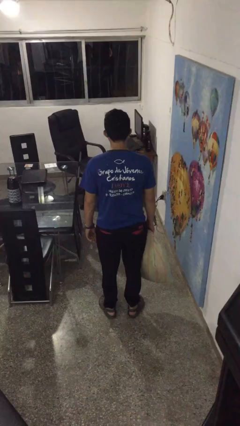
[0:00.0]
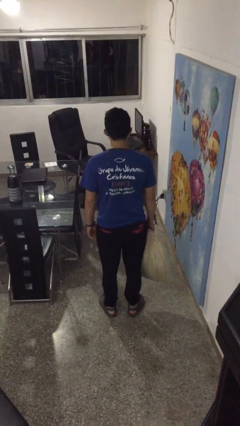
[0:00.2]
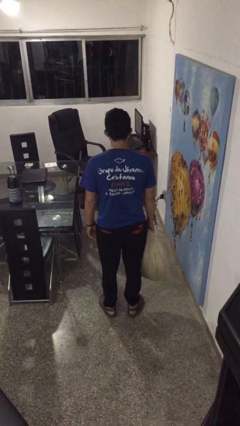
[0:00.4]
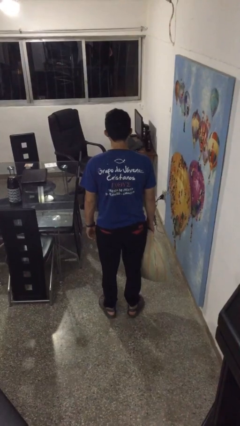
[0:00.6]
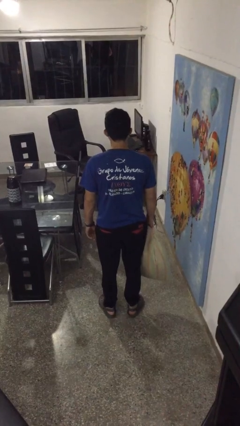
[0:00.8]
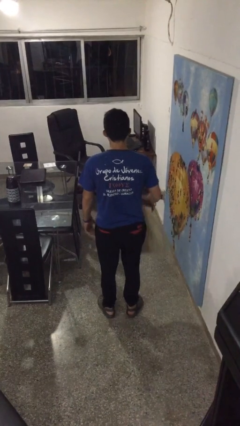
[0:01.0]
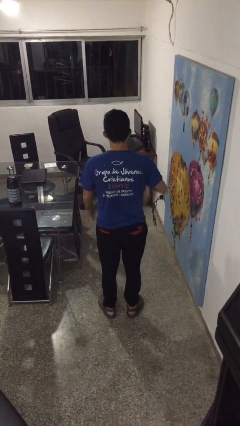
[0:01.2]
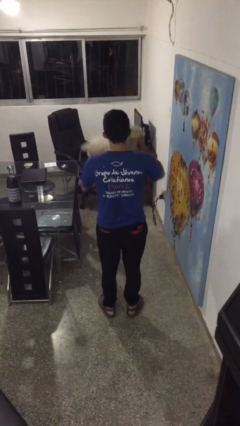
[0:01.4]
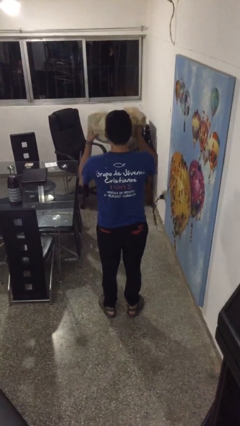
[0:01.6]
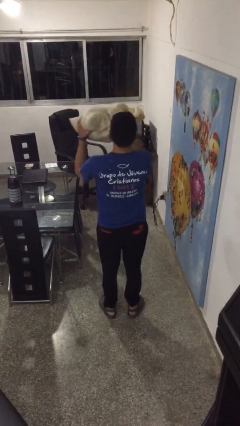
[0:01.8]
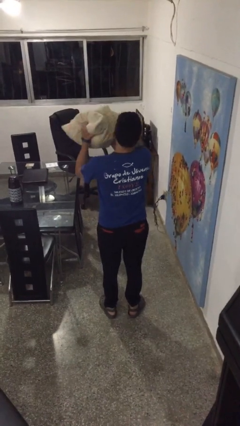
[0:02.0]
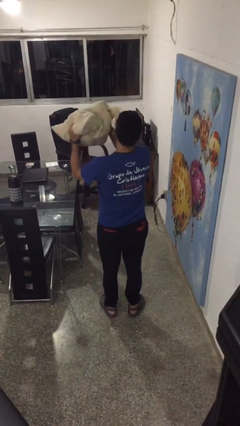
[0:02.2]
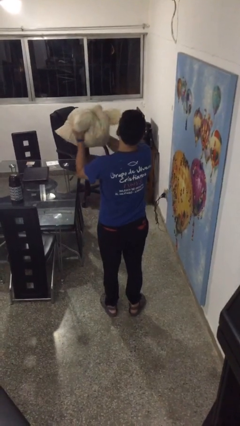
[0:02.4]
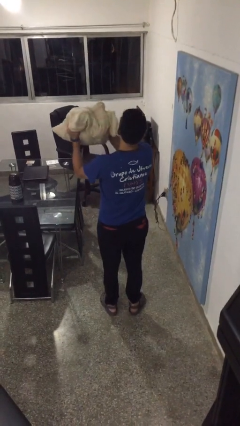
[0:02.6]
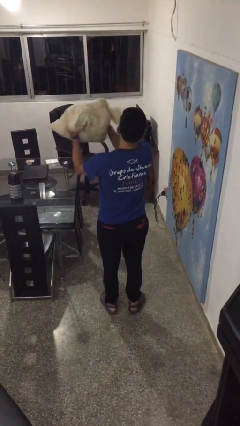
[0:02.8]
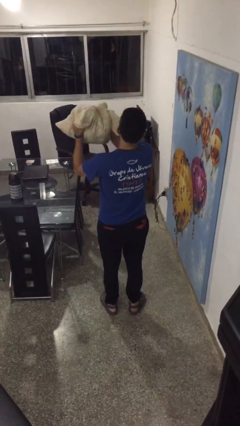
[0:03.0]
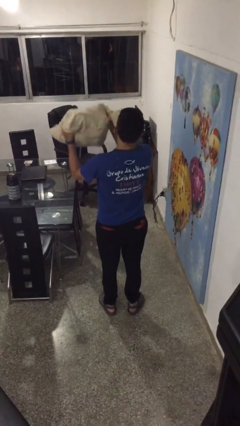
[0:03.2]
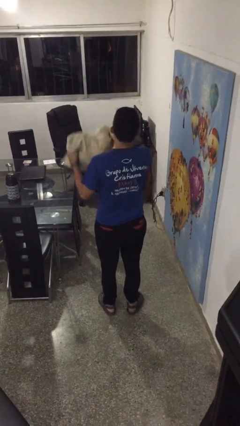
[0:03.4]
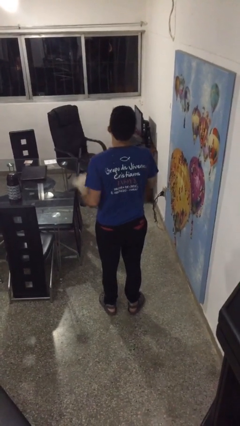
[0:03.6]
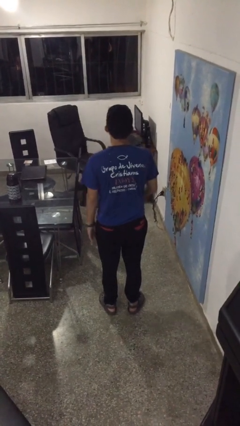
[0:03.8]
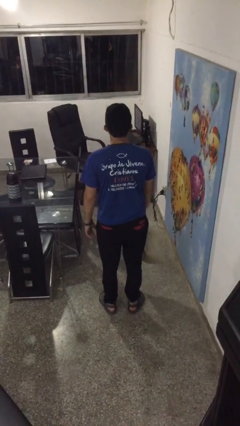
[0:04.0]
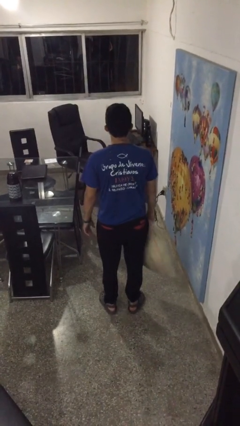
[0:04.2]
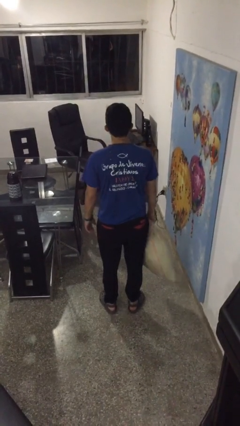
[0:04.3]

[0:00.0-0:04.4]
person squeezes object

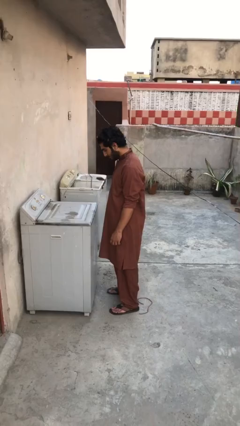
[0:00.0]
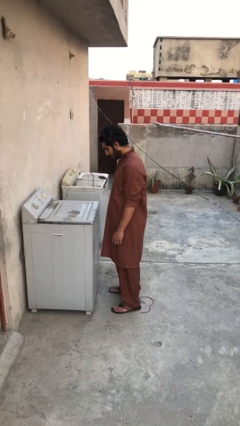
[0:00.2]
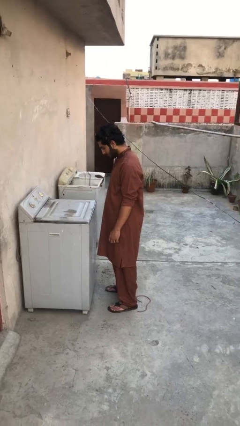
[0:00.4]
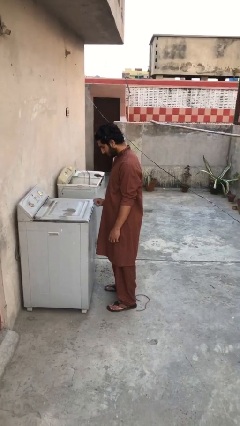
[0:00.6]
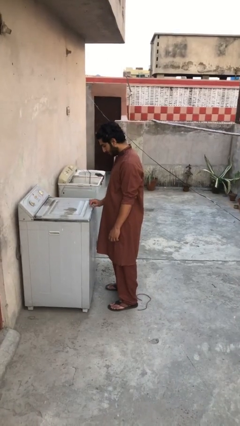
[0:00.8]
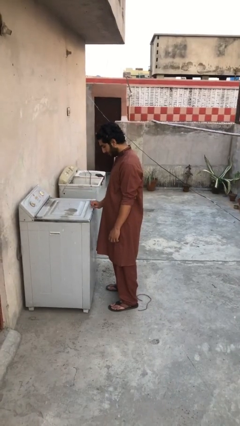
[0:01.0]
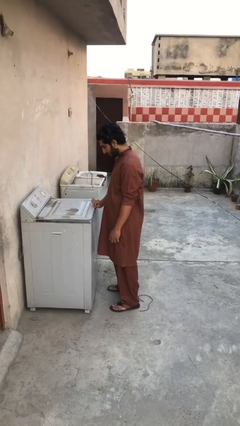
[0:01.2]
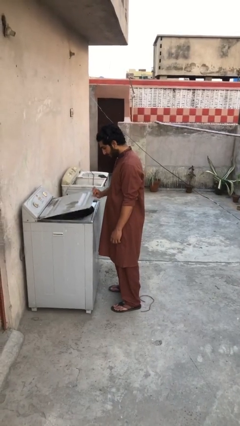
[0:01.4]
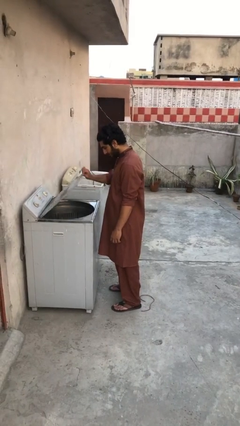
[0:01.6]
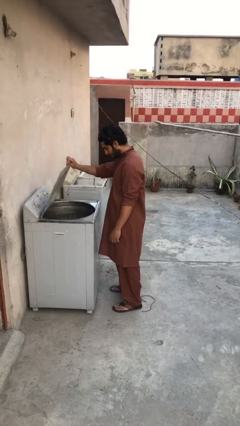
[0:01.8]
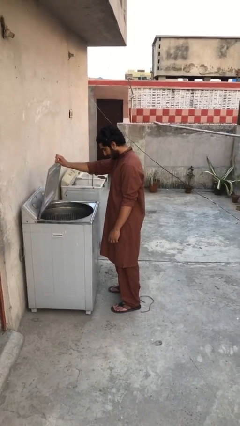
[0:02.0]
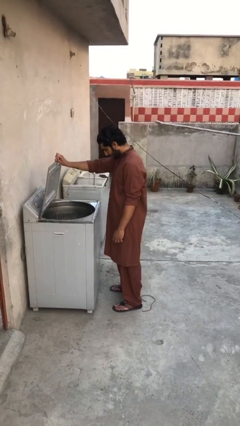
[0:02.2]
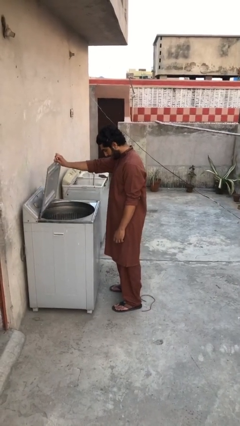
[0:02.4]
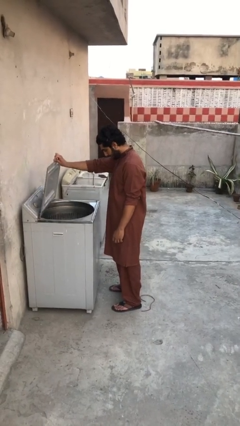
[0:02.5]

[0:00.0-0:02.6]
person opens clothes washer

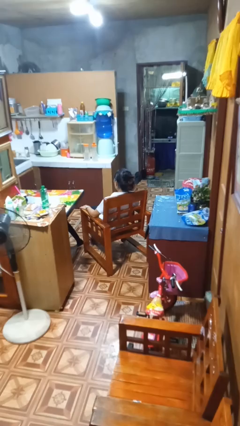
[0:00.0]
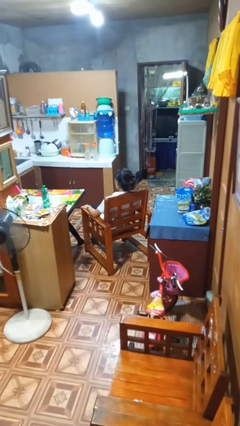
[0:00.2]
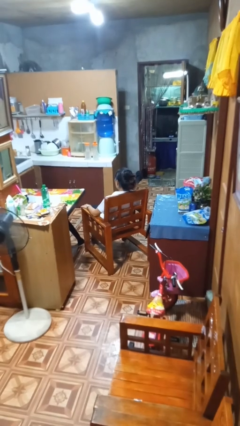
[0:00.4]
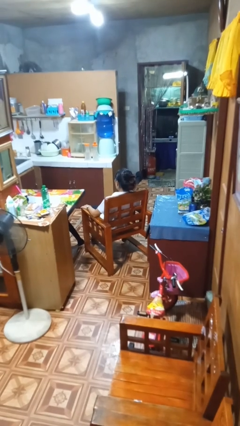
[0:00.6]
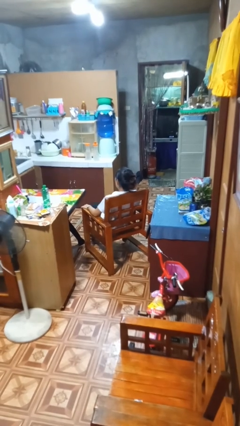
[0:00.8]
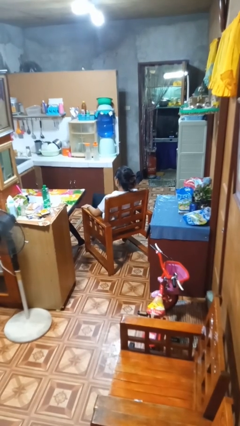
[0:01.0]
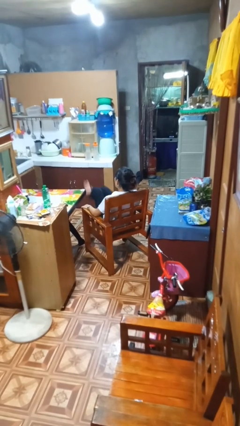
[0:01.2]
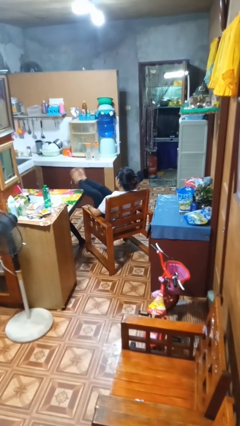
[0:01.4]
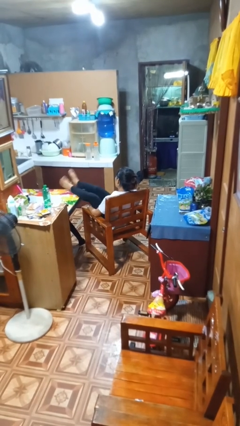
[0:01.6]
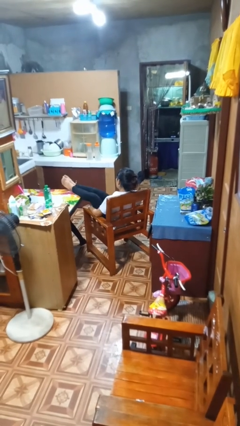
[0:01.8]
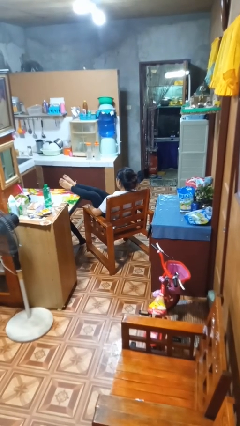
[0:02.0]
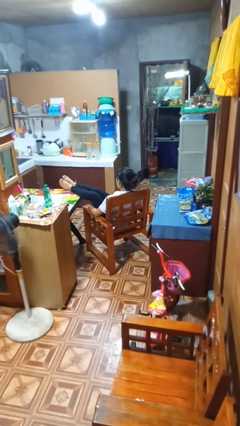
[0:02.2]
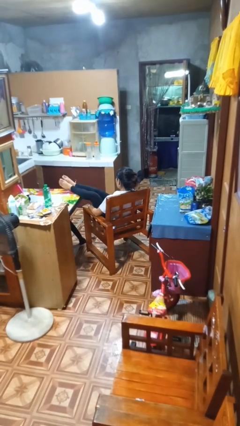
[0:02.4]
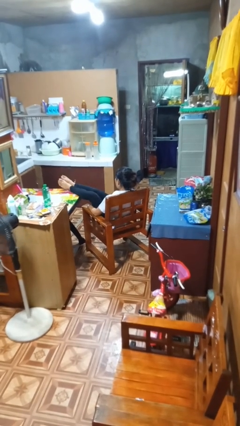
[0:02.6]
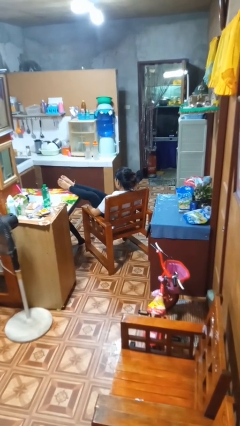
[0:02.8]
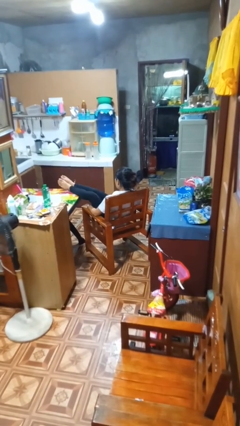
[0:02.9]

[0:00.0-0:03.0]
person puts feet up

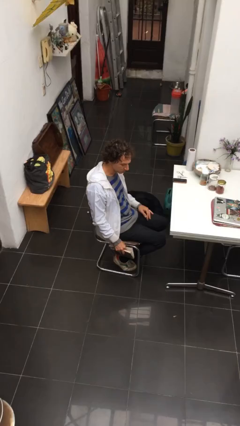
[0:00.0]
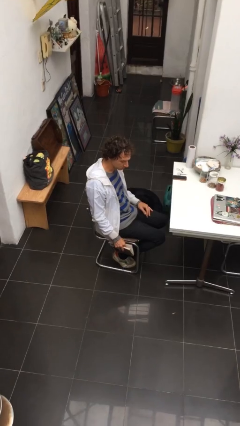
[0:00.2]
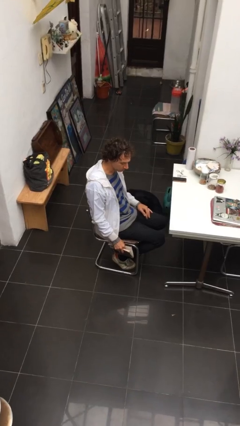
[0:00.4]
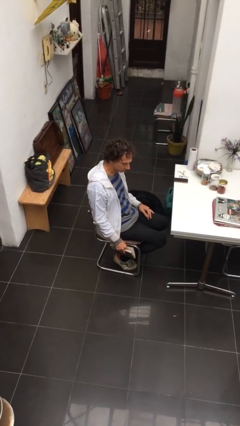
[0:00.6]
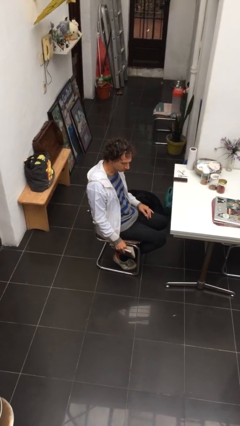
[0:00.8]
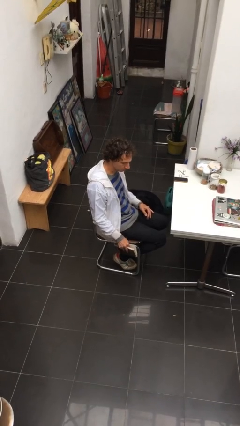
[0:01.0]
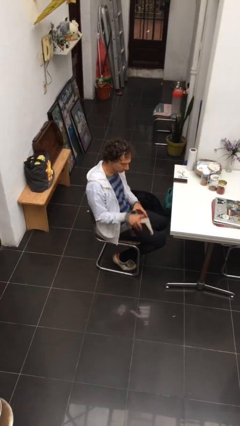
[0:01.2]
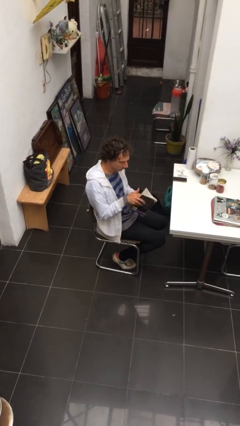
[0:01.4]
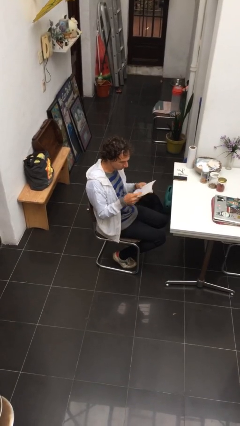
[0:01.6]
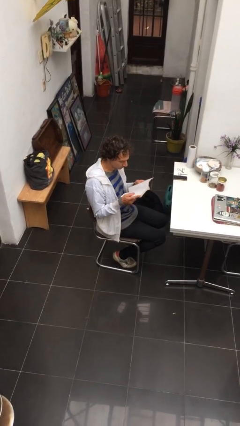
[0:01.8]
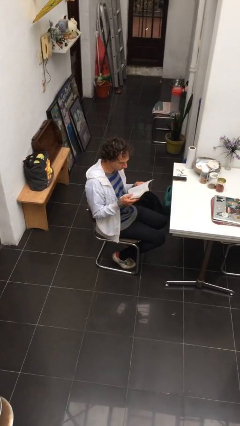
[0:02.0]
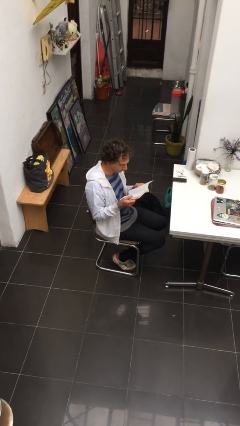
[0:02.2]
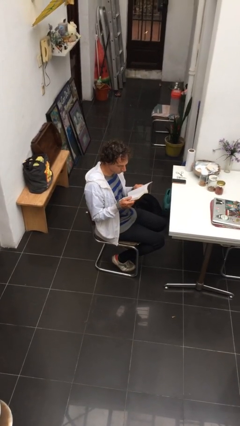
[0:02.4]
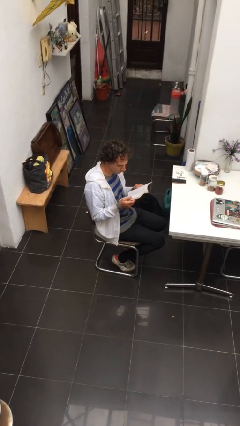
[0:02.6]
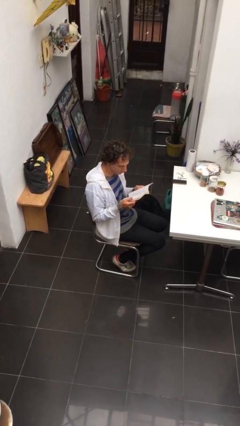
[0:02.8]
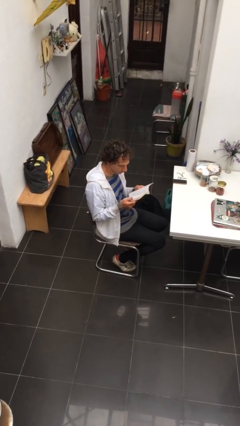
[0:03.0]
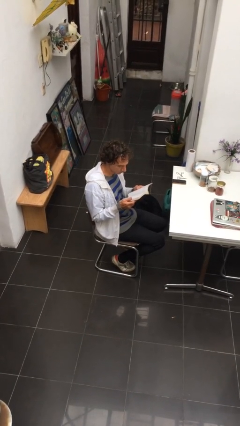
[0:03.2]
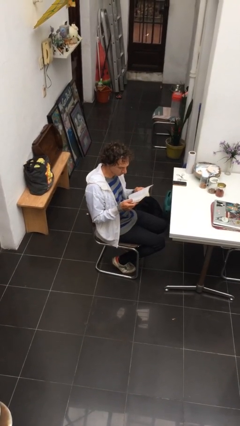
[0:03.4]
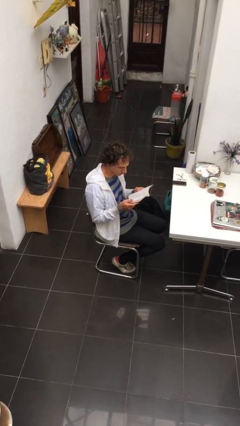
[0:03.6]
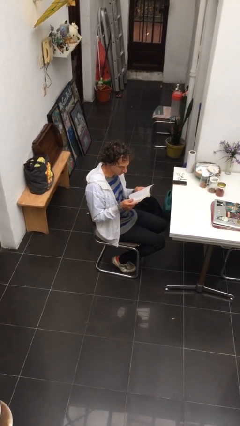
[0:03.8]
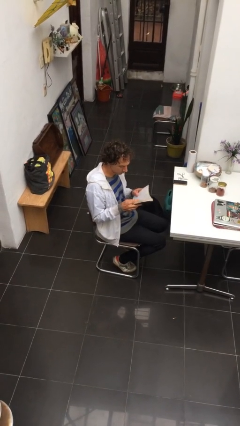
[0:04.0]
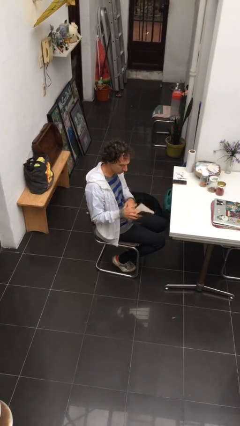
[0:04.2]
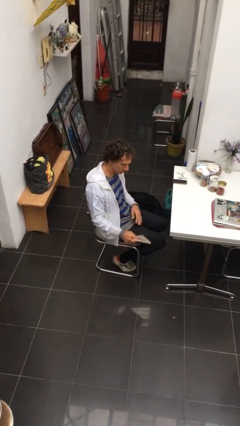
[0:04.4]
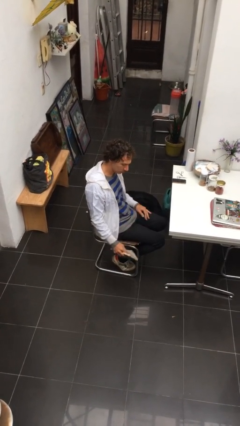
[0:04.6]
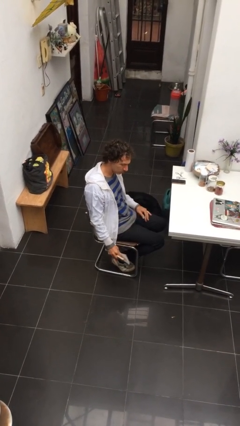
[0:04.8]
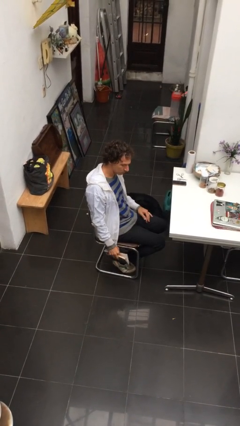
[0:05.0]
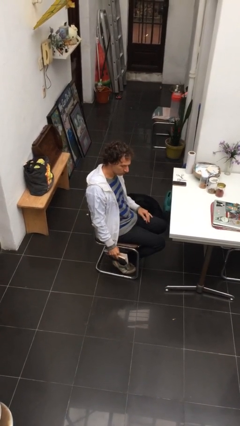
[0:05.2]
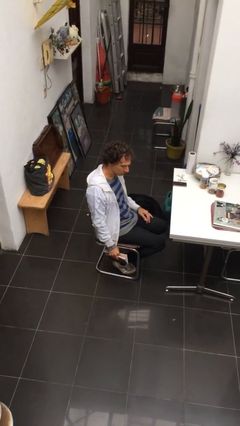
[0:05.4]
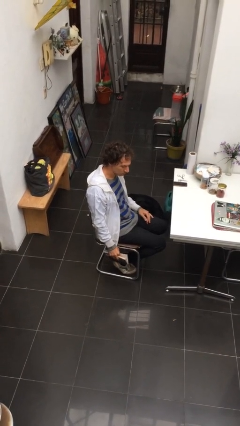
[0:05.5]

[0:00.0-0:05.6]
person reads document

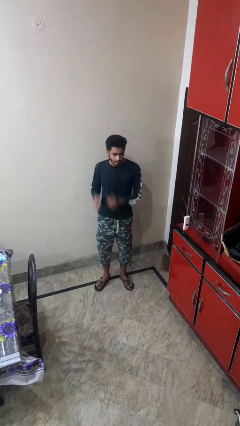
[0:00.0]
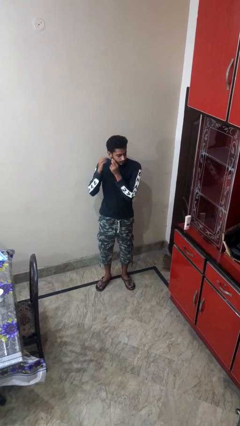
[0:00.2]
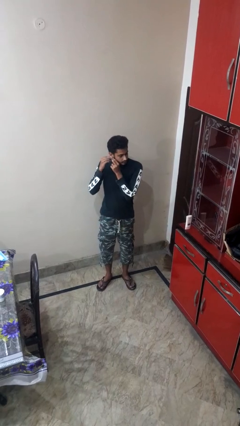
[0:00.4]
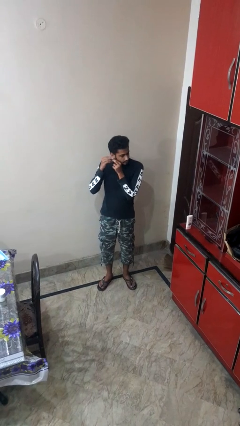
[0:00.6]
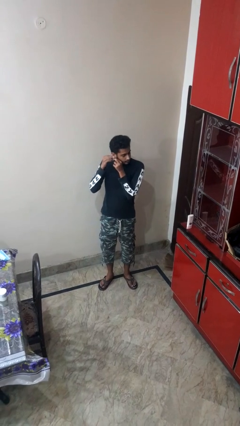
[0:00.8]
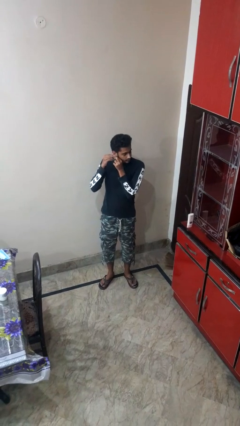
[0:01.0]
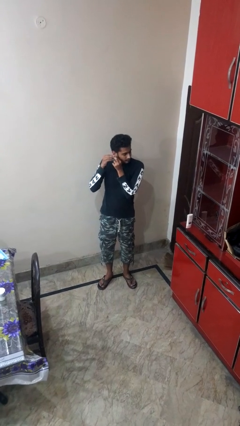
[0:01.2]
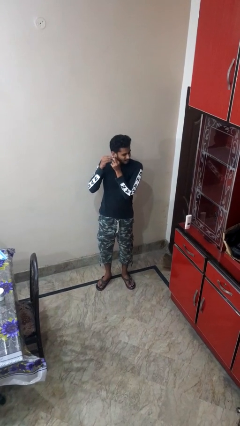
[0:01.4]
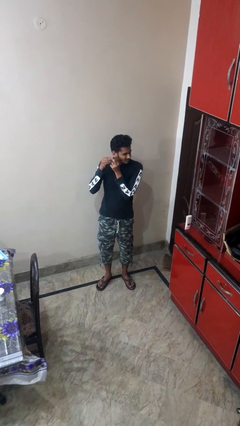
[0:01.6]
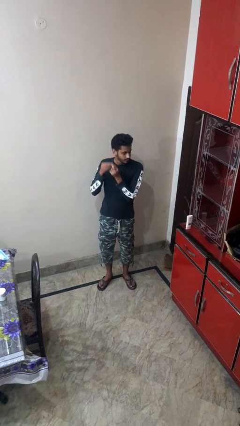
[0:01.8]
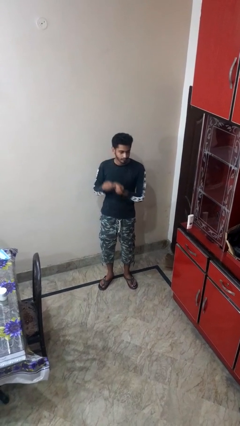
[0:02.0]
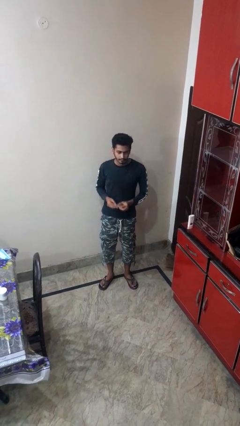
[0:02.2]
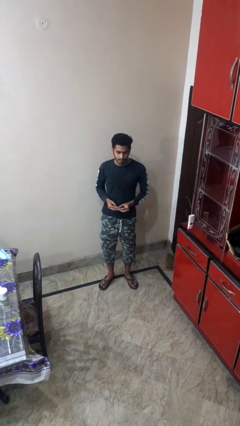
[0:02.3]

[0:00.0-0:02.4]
person takes off earrings

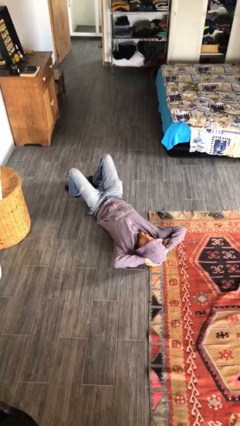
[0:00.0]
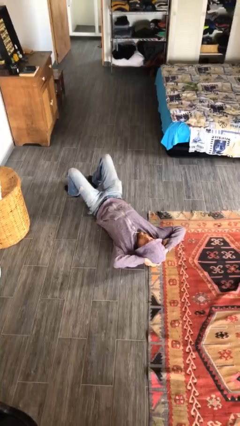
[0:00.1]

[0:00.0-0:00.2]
person exercises with situp
